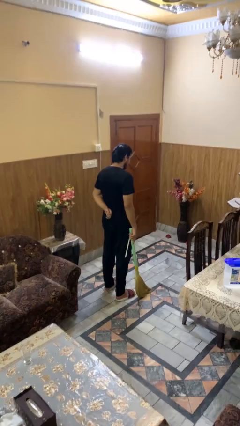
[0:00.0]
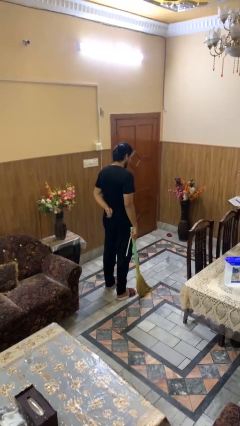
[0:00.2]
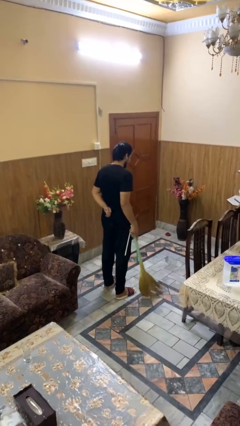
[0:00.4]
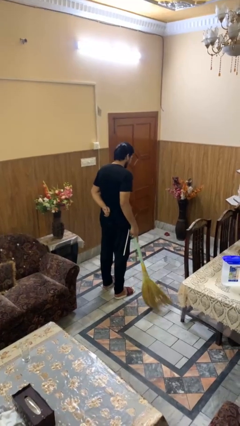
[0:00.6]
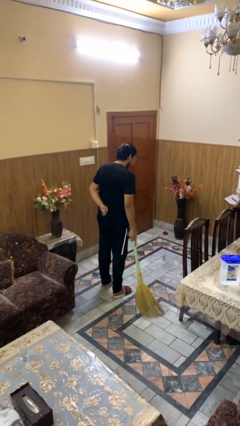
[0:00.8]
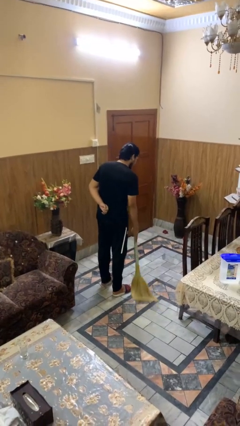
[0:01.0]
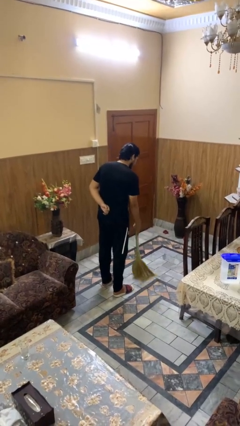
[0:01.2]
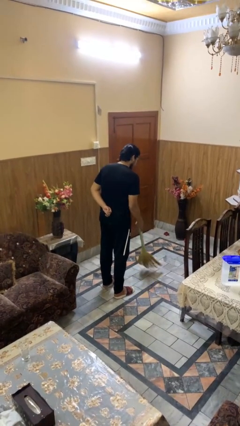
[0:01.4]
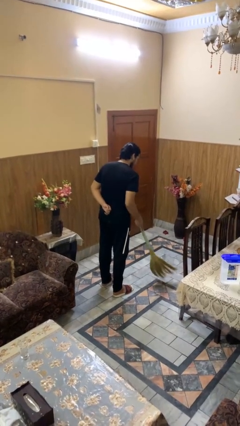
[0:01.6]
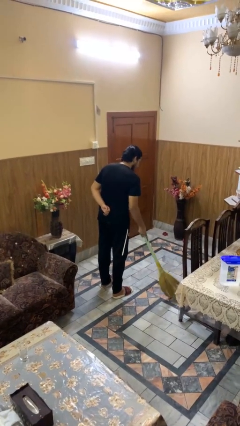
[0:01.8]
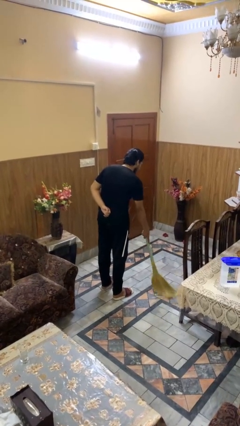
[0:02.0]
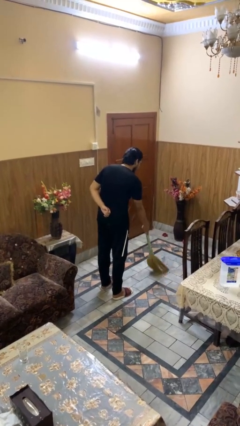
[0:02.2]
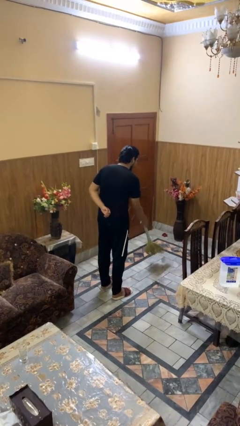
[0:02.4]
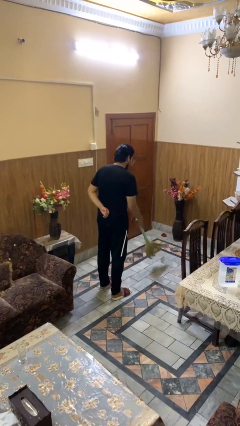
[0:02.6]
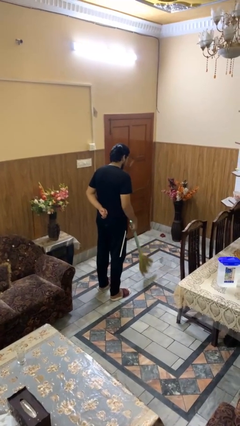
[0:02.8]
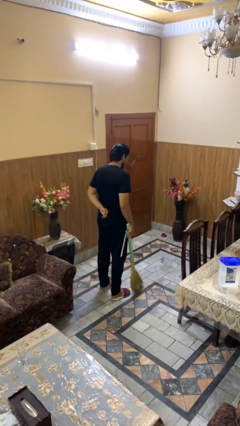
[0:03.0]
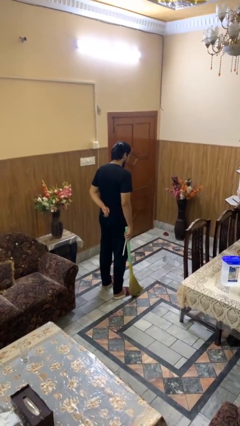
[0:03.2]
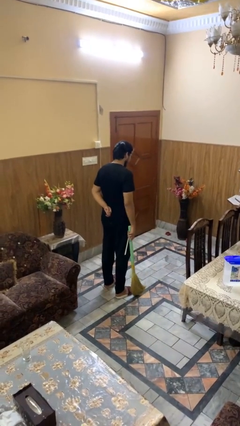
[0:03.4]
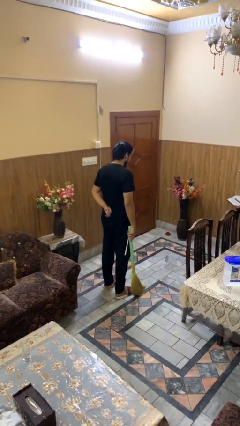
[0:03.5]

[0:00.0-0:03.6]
person sweeps floor

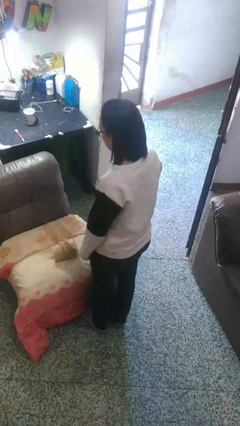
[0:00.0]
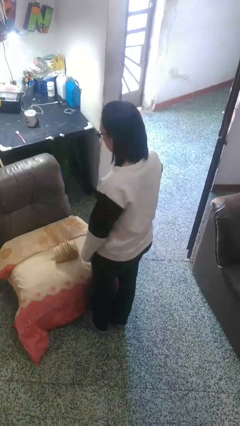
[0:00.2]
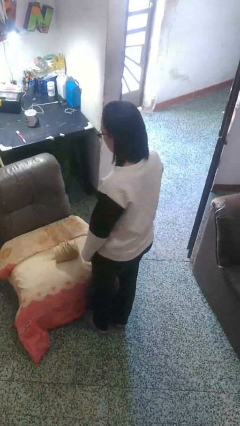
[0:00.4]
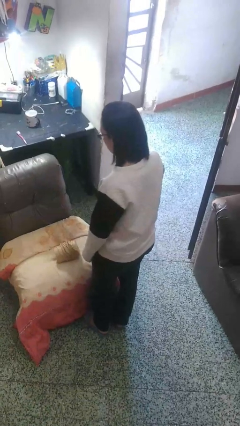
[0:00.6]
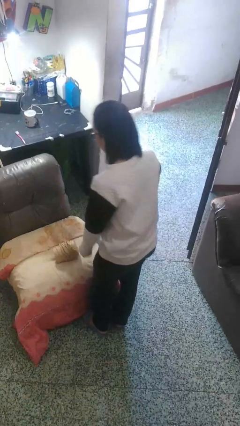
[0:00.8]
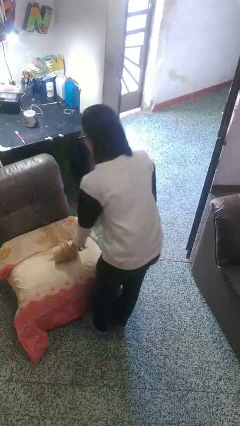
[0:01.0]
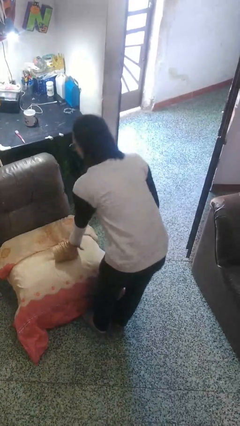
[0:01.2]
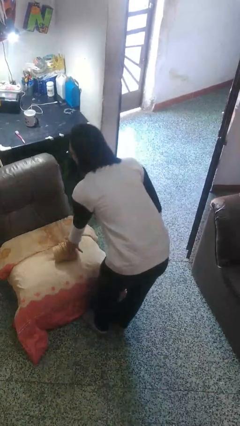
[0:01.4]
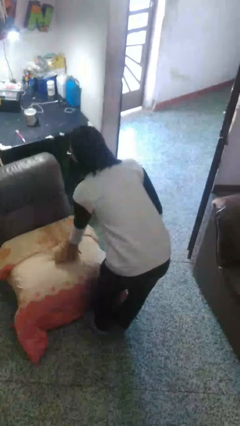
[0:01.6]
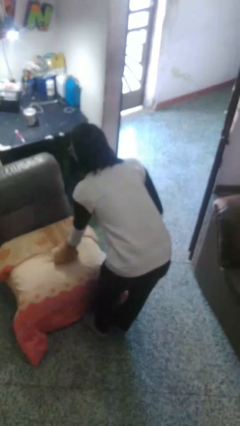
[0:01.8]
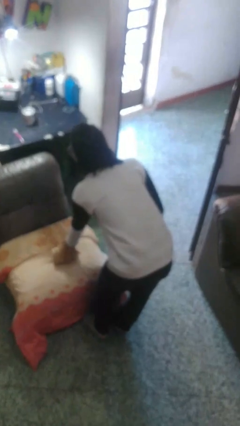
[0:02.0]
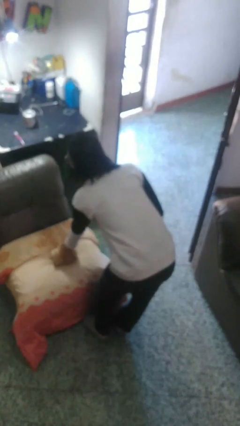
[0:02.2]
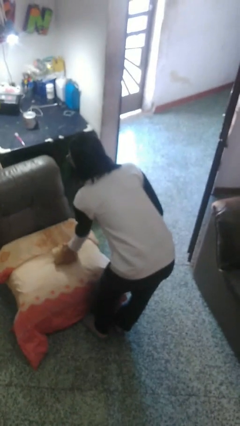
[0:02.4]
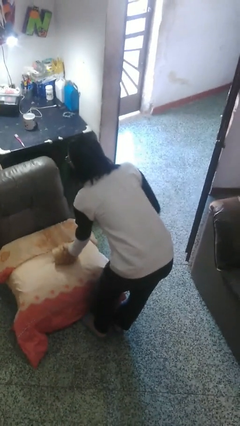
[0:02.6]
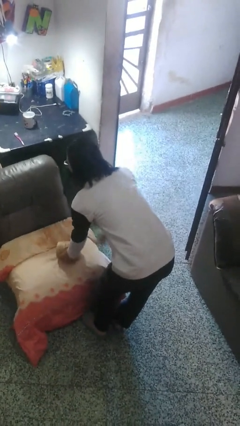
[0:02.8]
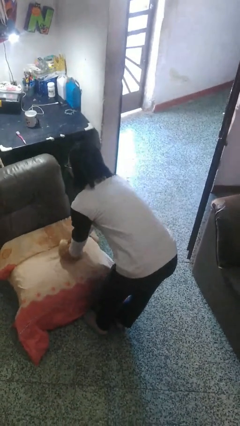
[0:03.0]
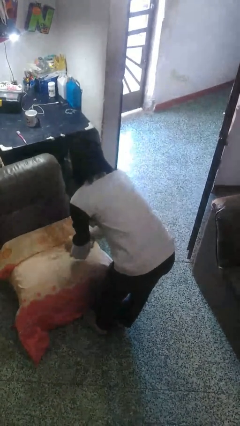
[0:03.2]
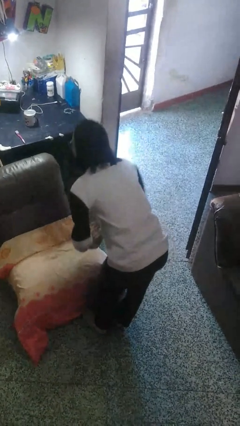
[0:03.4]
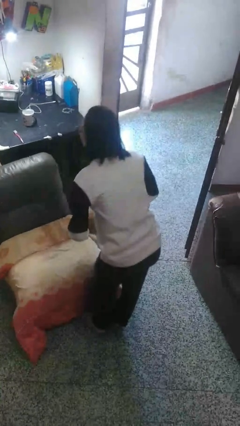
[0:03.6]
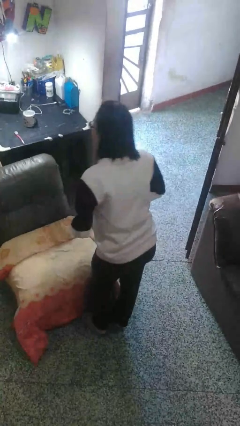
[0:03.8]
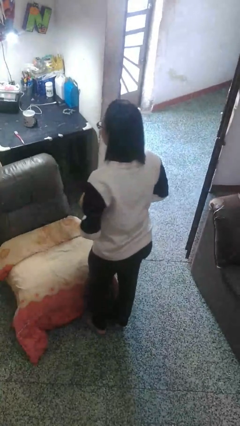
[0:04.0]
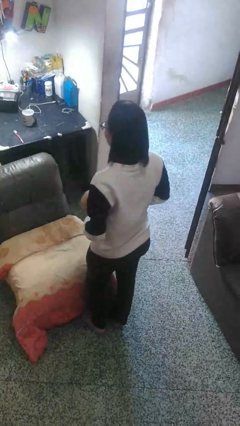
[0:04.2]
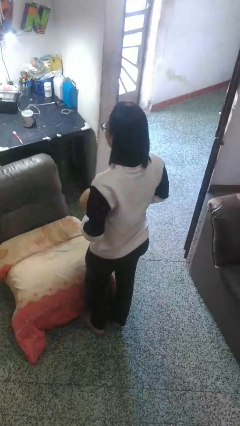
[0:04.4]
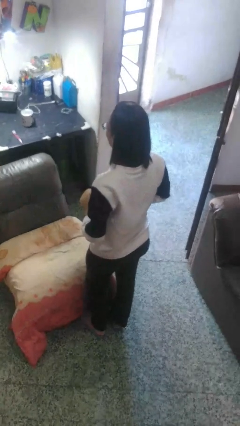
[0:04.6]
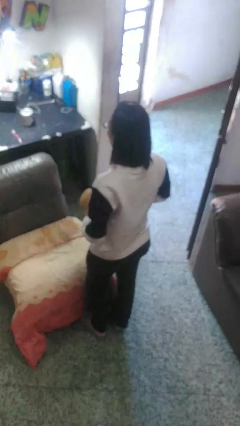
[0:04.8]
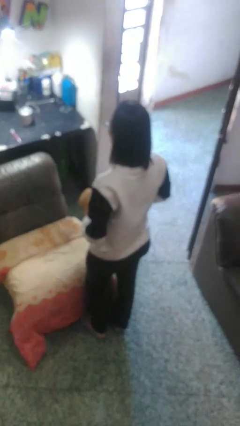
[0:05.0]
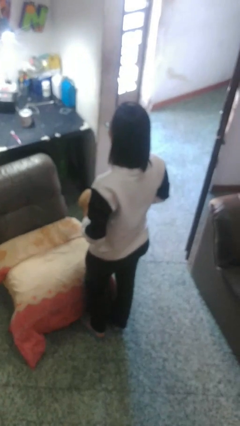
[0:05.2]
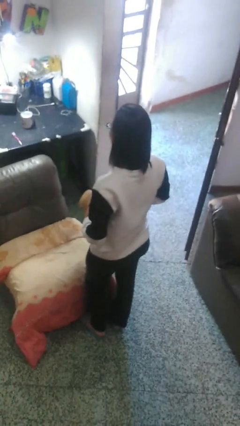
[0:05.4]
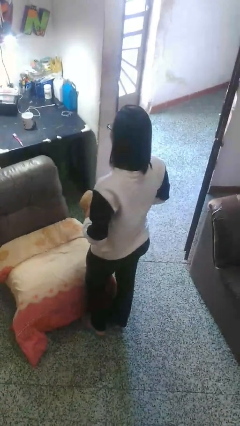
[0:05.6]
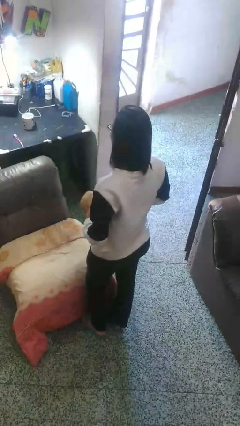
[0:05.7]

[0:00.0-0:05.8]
person picks up object from couch

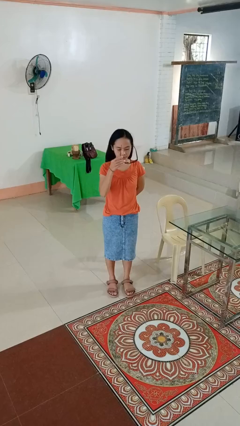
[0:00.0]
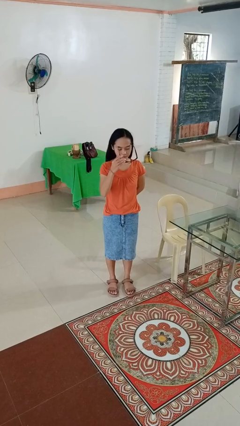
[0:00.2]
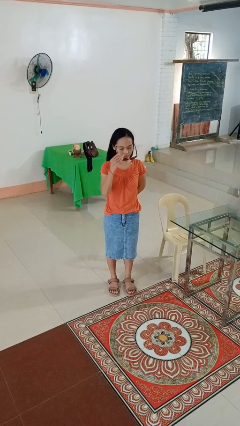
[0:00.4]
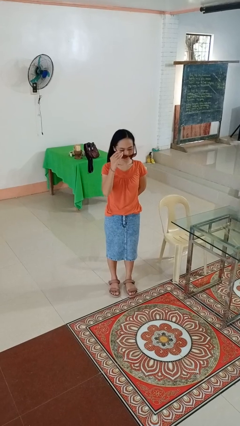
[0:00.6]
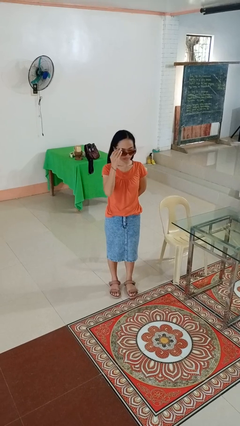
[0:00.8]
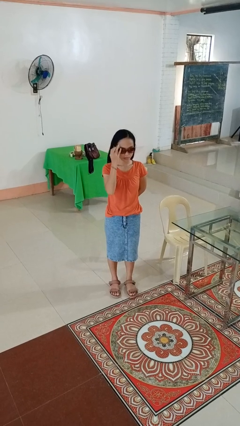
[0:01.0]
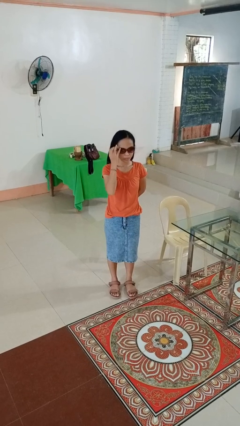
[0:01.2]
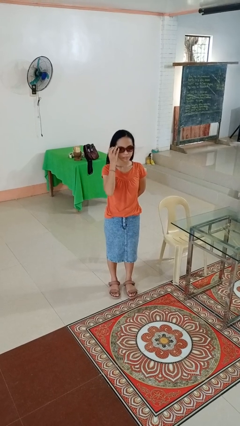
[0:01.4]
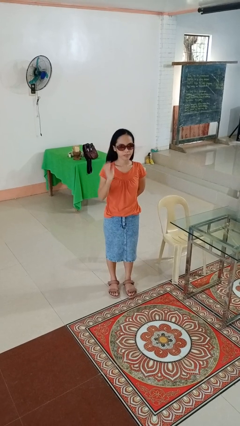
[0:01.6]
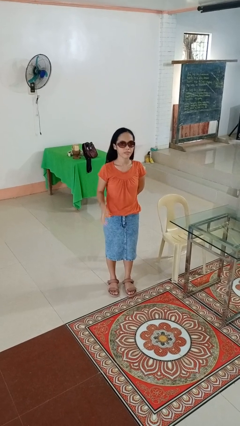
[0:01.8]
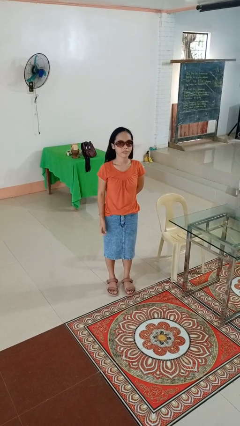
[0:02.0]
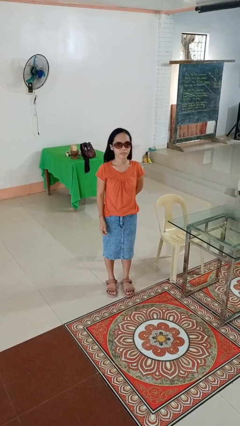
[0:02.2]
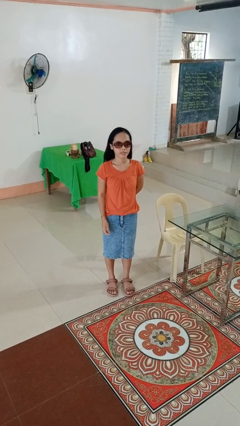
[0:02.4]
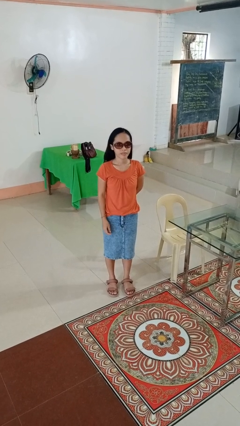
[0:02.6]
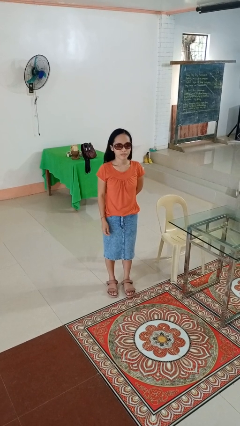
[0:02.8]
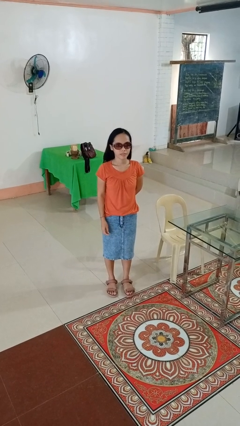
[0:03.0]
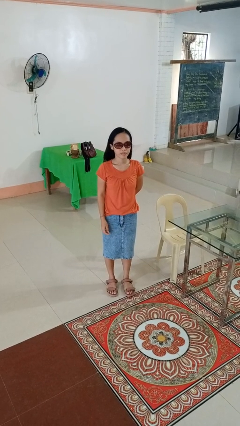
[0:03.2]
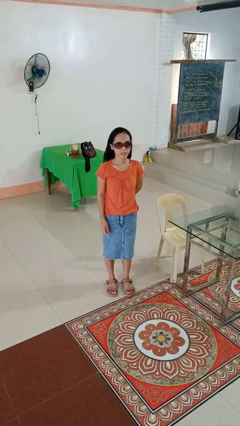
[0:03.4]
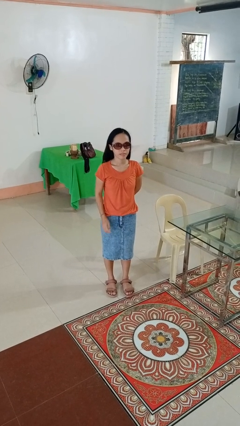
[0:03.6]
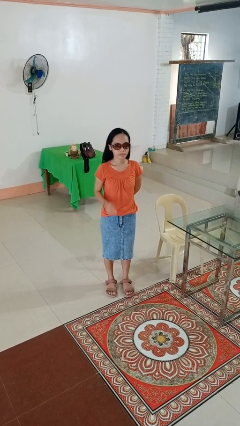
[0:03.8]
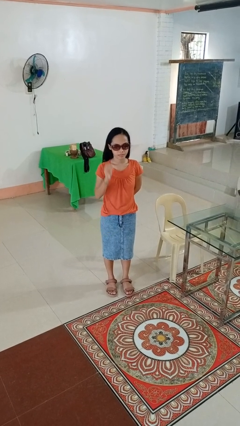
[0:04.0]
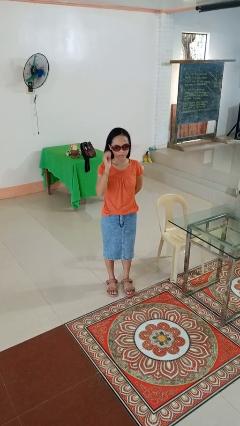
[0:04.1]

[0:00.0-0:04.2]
person puts on sunglasses

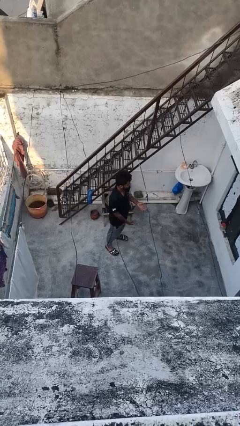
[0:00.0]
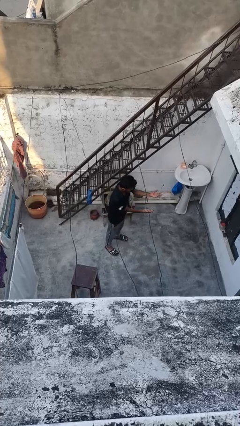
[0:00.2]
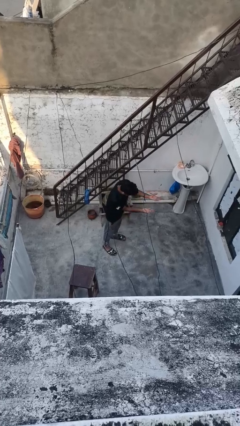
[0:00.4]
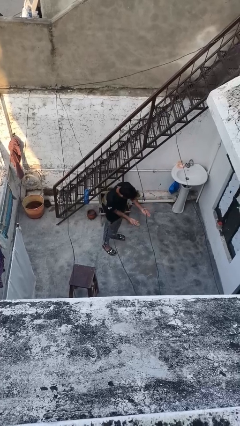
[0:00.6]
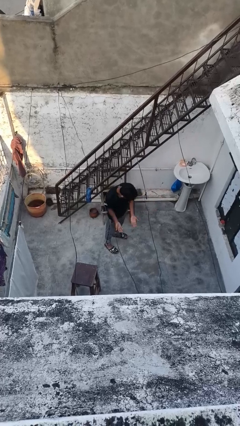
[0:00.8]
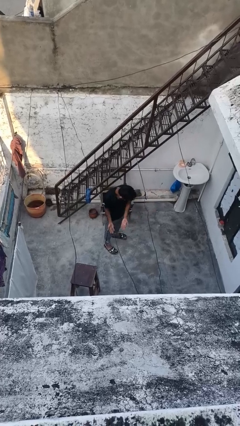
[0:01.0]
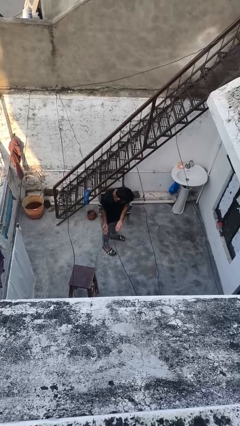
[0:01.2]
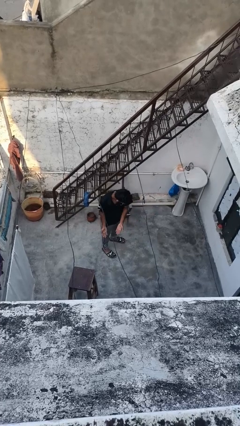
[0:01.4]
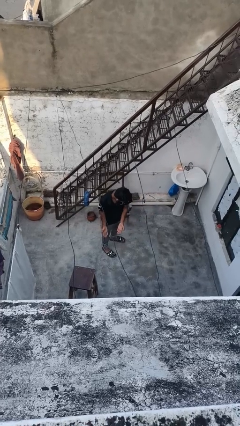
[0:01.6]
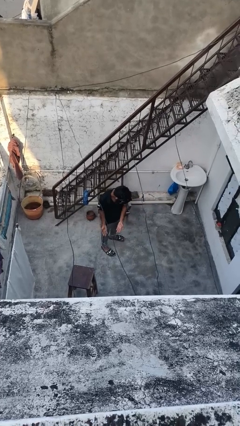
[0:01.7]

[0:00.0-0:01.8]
person gestures come here

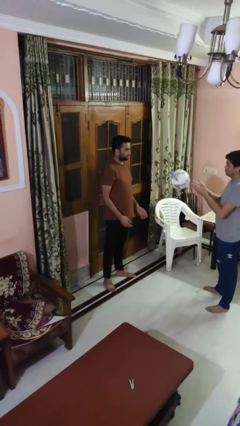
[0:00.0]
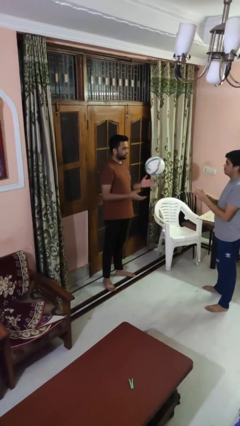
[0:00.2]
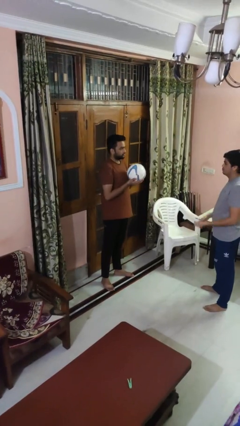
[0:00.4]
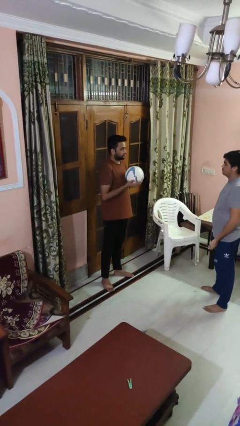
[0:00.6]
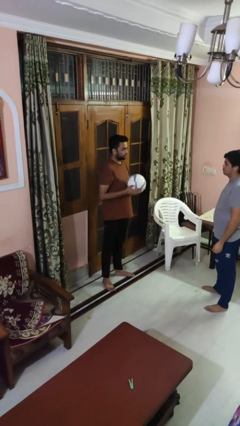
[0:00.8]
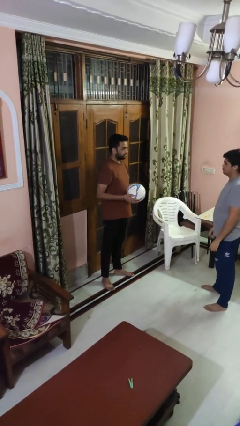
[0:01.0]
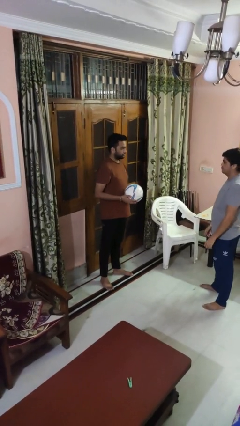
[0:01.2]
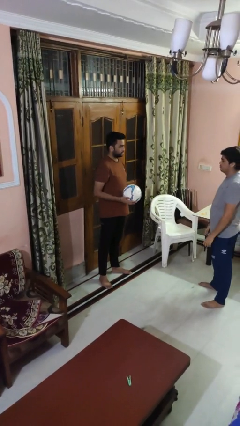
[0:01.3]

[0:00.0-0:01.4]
person catches object from person

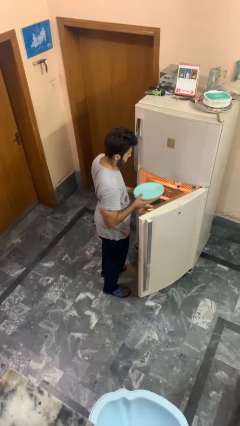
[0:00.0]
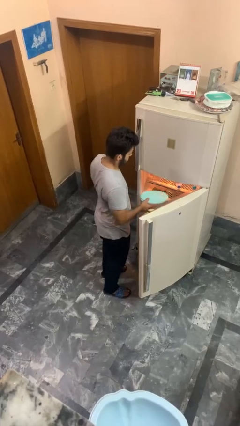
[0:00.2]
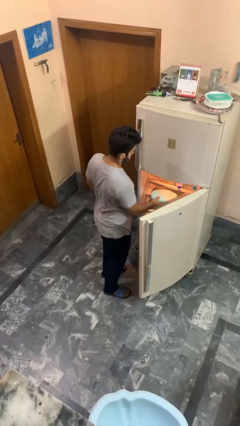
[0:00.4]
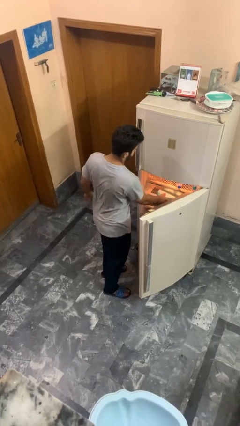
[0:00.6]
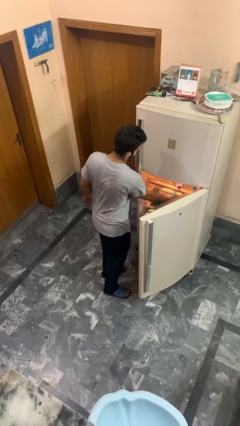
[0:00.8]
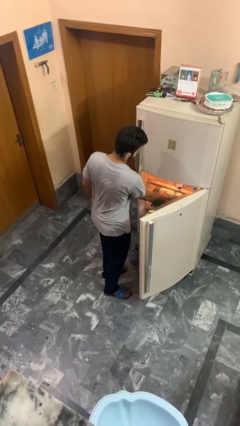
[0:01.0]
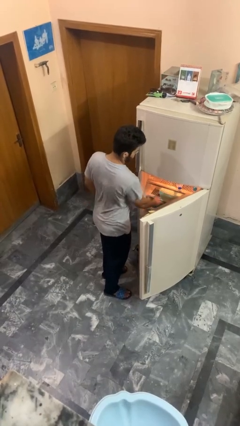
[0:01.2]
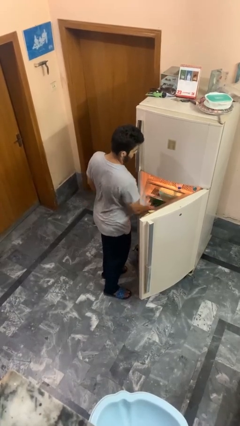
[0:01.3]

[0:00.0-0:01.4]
person puts down object into cabinet
